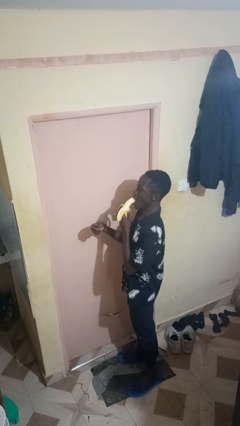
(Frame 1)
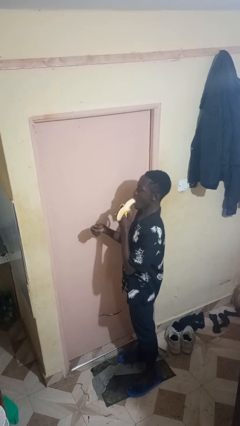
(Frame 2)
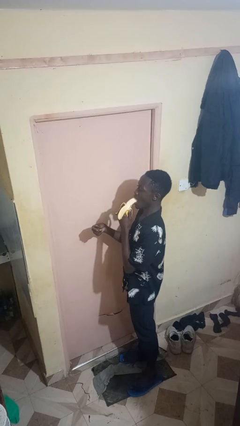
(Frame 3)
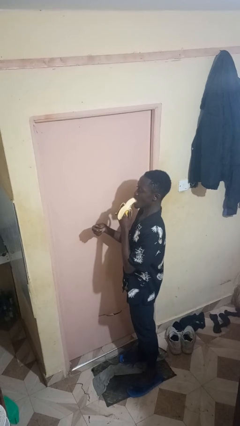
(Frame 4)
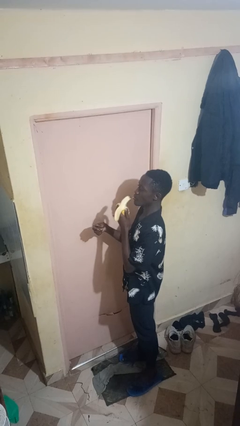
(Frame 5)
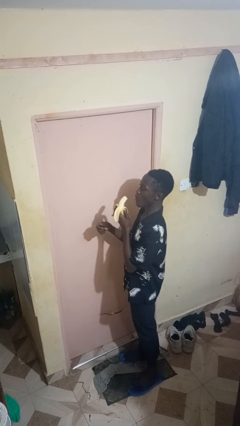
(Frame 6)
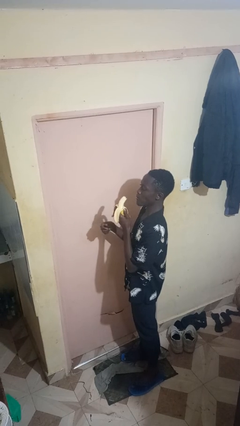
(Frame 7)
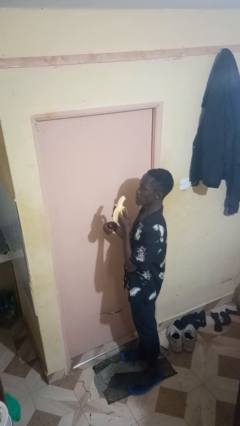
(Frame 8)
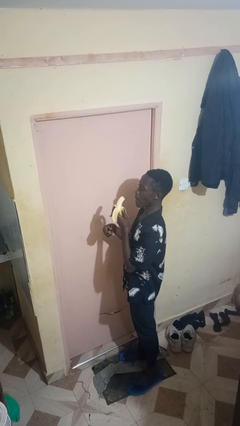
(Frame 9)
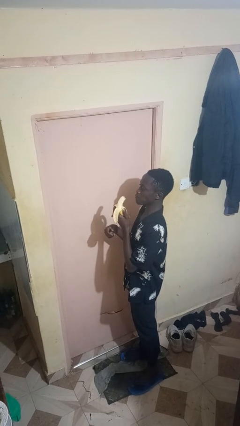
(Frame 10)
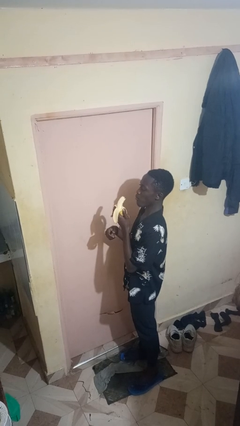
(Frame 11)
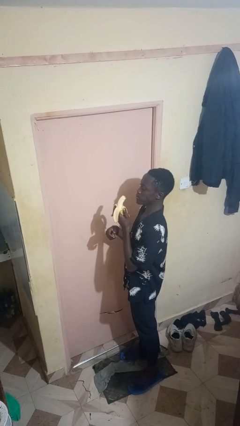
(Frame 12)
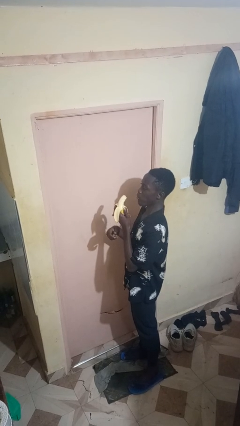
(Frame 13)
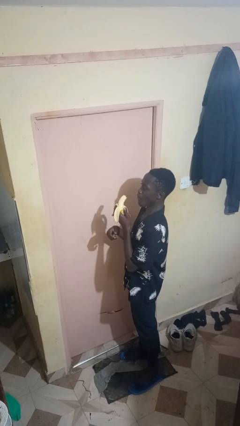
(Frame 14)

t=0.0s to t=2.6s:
person eats banana

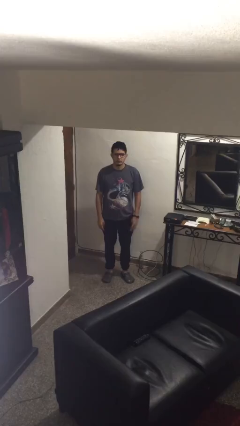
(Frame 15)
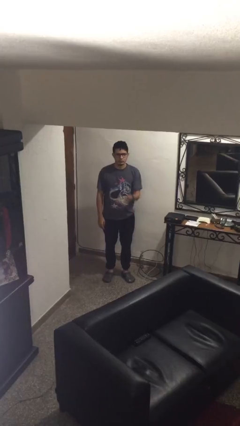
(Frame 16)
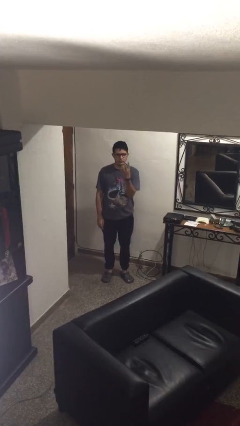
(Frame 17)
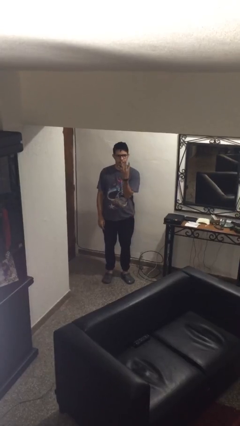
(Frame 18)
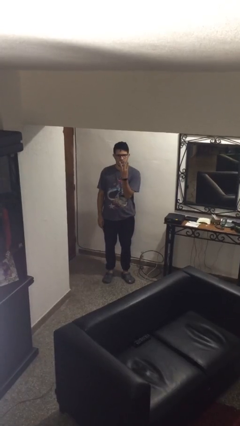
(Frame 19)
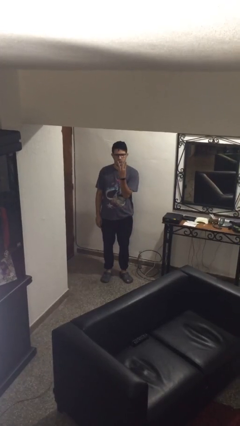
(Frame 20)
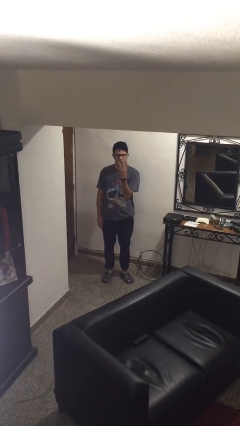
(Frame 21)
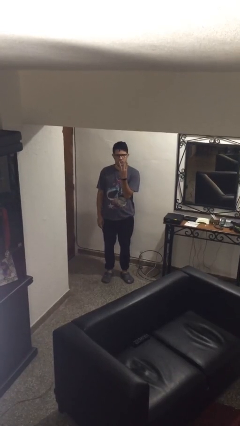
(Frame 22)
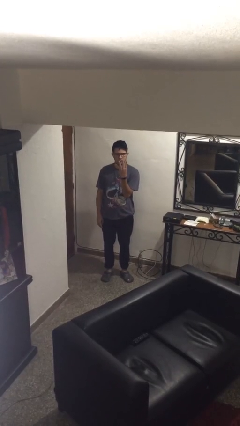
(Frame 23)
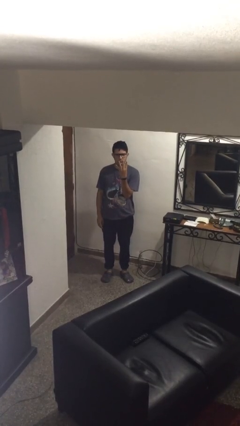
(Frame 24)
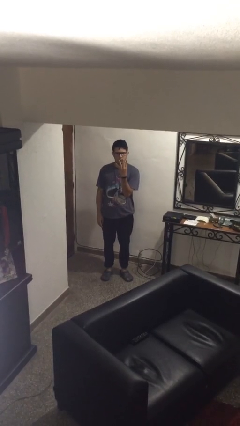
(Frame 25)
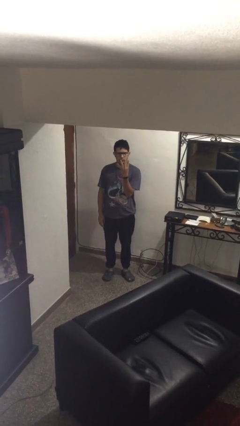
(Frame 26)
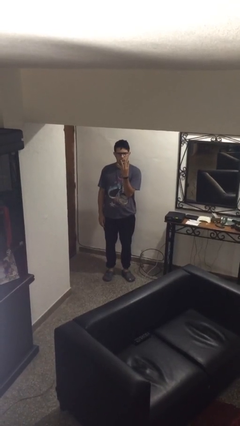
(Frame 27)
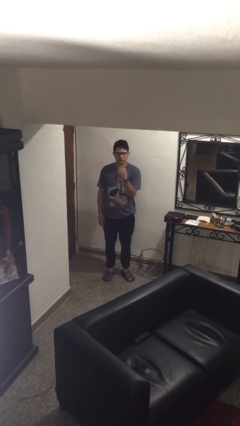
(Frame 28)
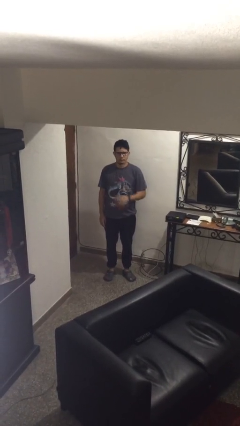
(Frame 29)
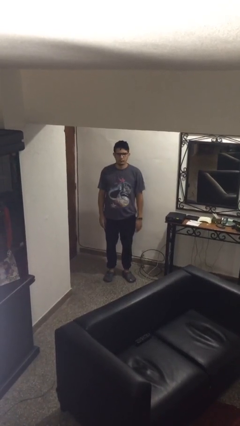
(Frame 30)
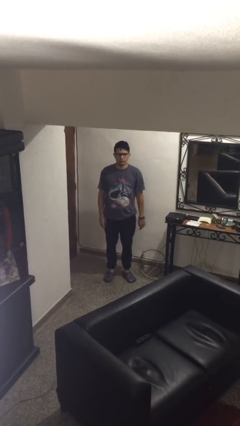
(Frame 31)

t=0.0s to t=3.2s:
person gestures number four

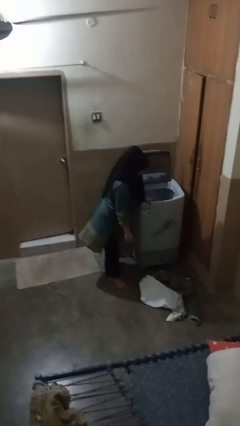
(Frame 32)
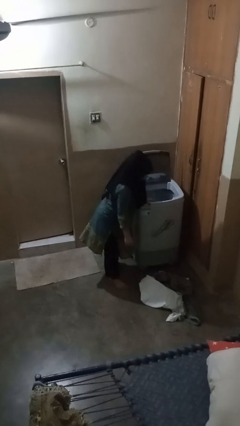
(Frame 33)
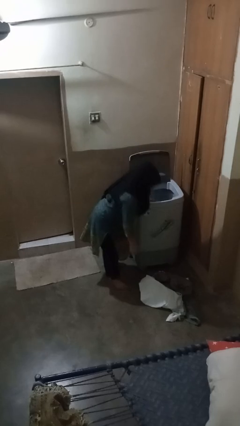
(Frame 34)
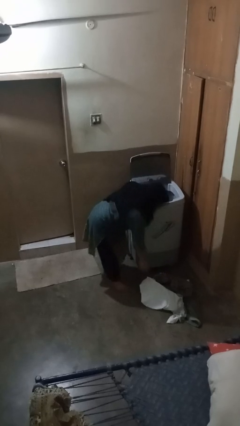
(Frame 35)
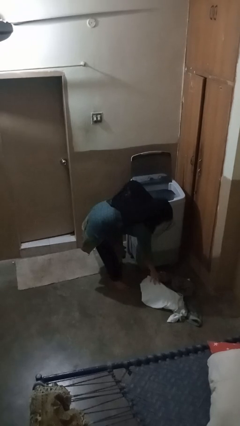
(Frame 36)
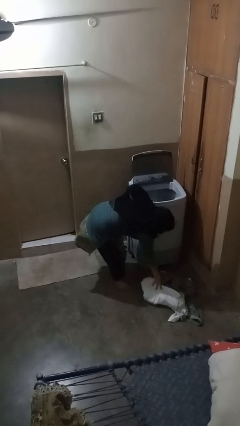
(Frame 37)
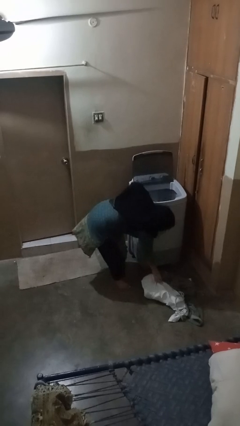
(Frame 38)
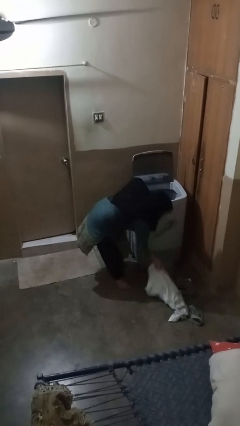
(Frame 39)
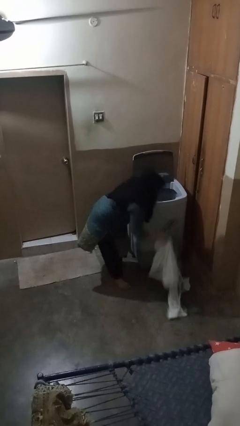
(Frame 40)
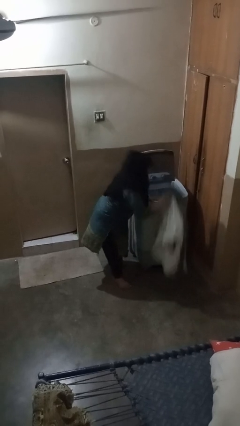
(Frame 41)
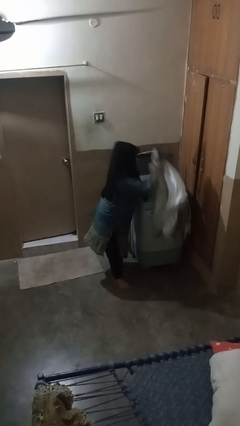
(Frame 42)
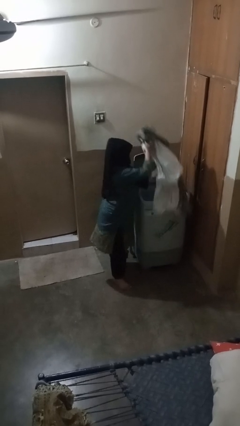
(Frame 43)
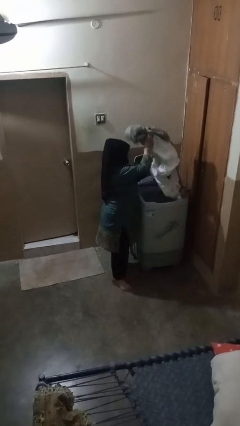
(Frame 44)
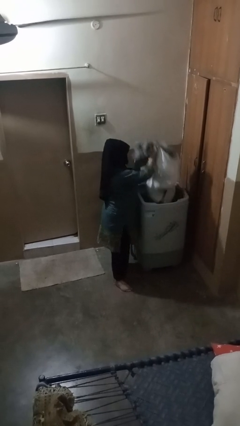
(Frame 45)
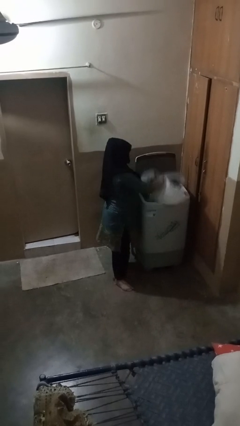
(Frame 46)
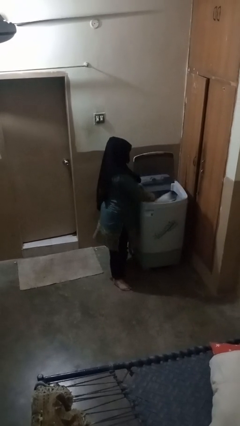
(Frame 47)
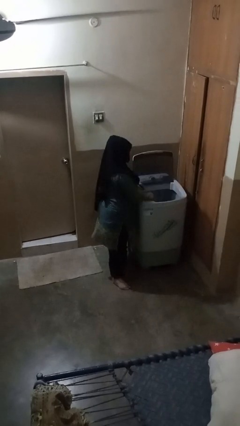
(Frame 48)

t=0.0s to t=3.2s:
person loads clotheswasher

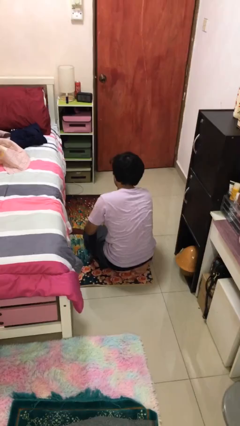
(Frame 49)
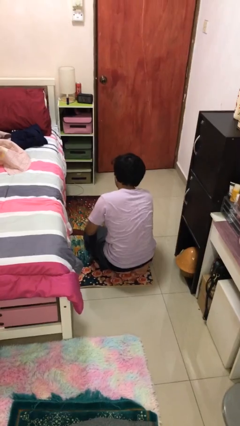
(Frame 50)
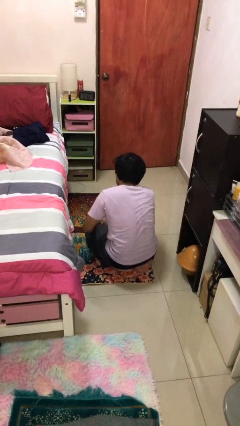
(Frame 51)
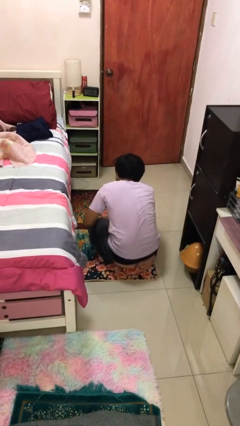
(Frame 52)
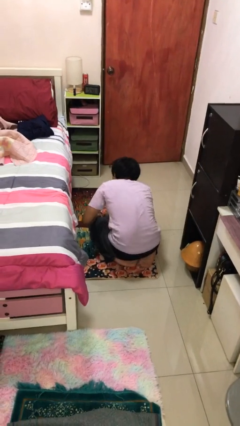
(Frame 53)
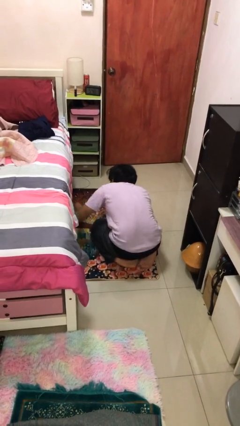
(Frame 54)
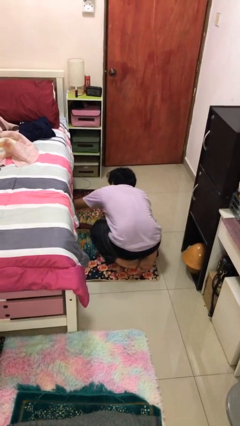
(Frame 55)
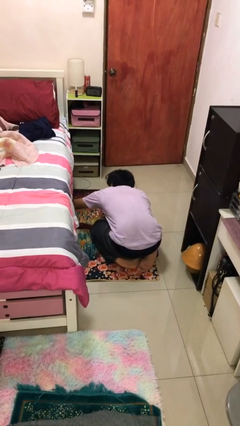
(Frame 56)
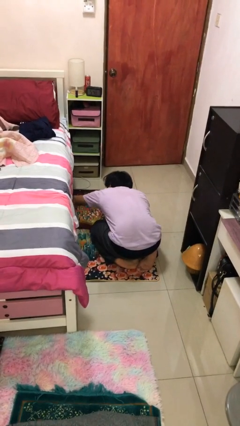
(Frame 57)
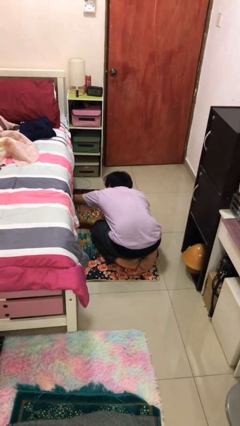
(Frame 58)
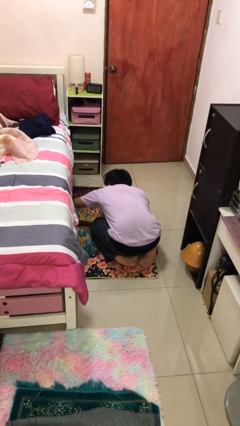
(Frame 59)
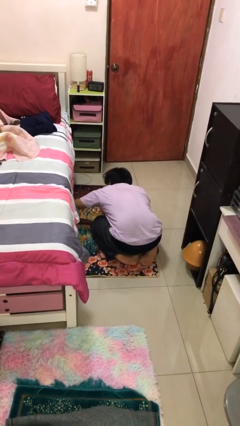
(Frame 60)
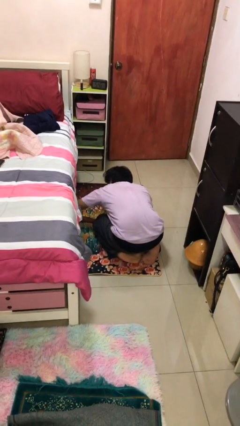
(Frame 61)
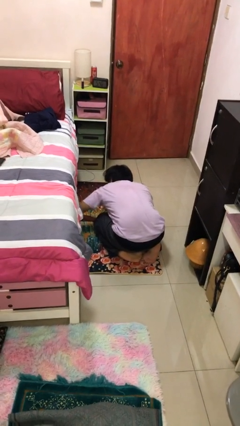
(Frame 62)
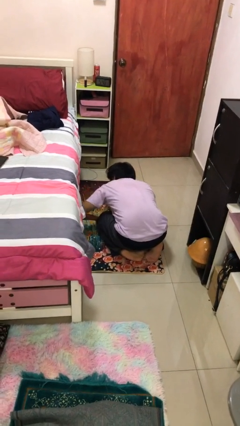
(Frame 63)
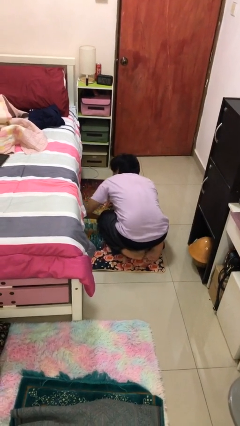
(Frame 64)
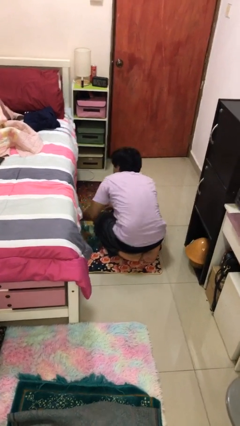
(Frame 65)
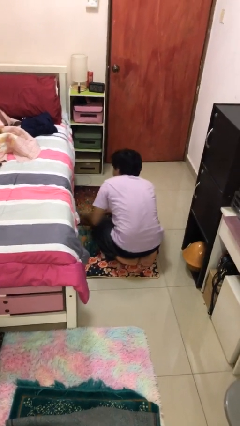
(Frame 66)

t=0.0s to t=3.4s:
person searches under bed

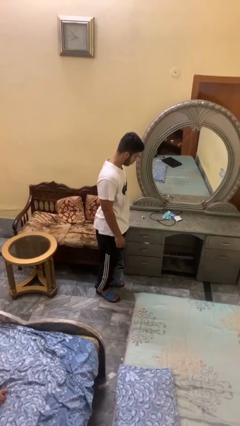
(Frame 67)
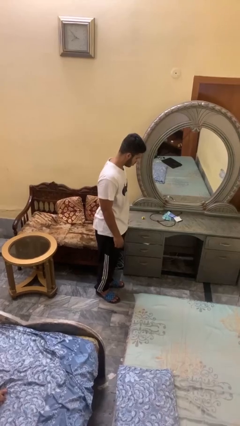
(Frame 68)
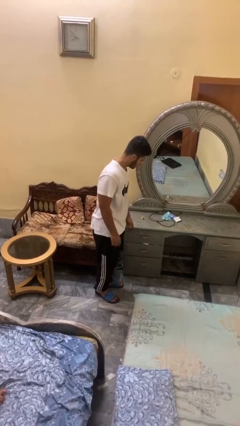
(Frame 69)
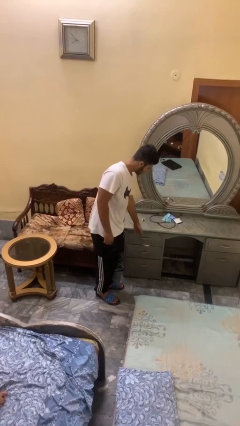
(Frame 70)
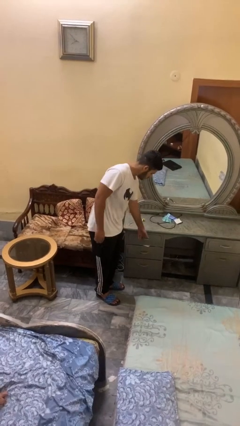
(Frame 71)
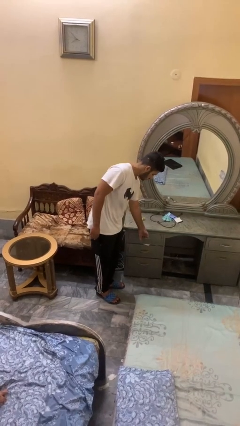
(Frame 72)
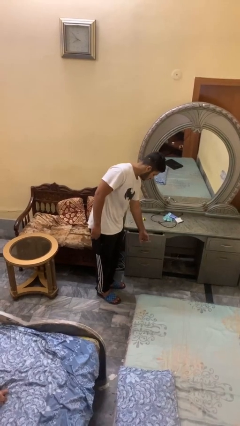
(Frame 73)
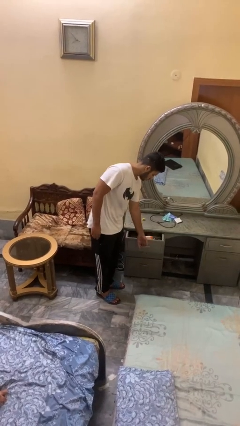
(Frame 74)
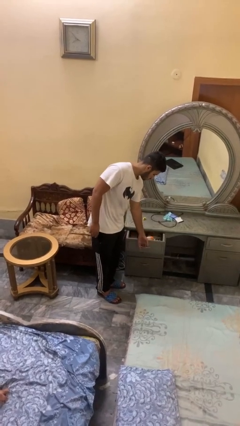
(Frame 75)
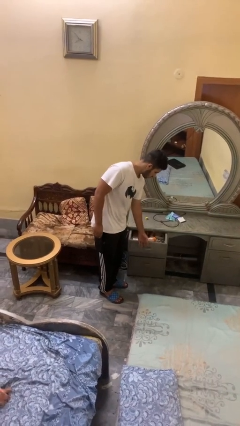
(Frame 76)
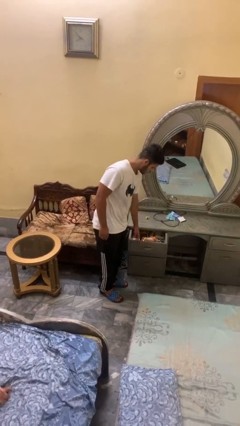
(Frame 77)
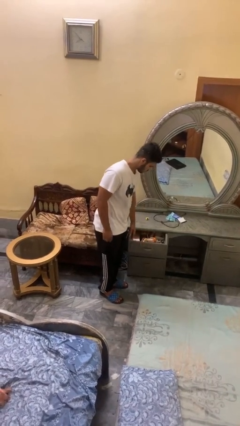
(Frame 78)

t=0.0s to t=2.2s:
person opens dresser drawer

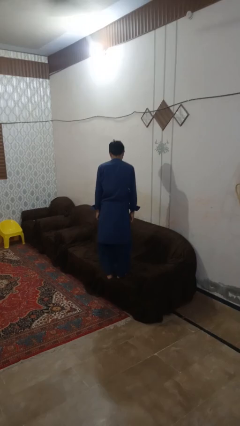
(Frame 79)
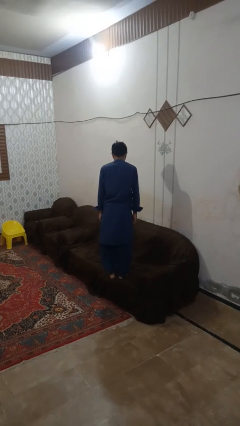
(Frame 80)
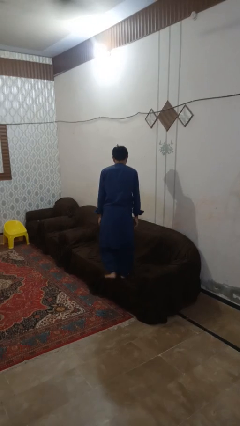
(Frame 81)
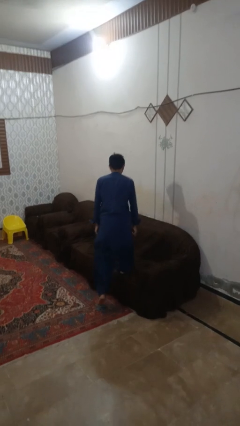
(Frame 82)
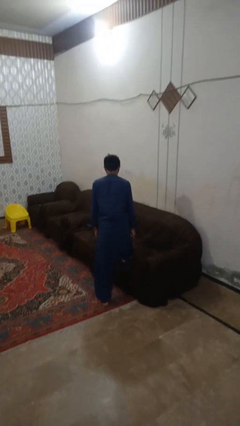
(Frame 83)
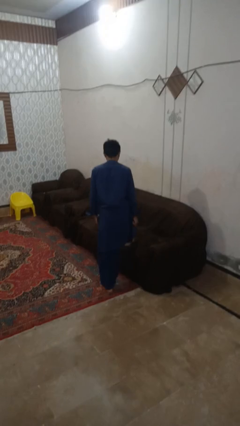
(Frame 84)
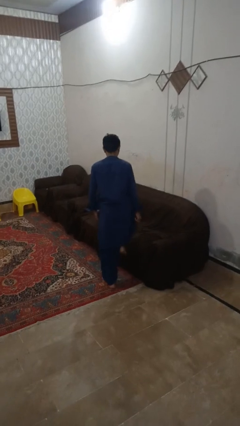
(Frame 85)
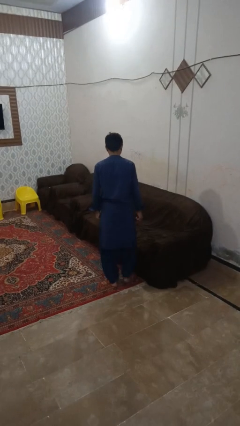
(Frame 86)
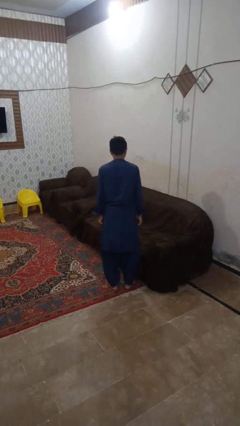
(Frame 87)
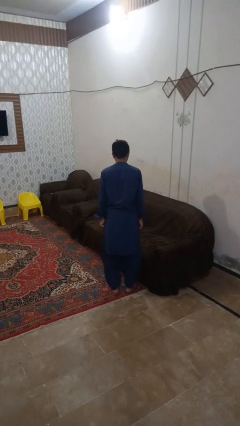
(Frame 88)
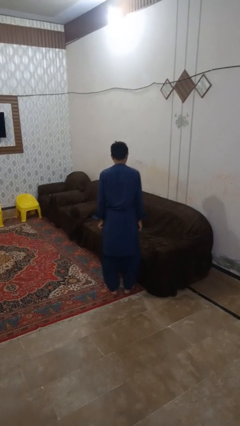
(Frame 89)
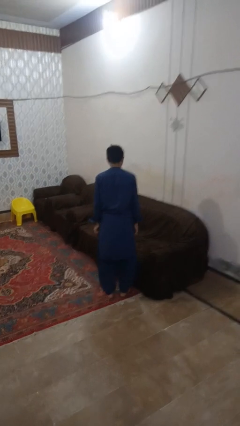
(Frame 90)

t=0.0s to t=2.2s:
person climbs off couch

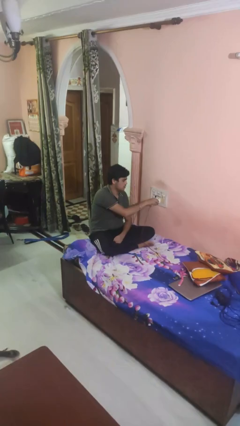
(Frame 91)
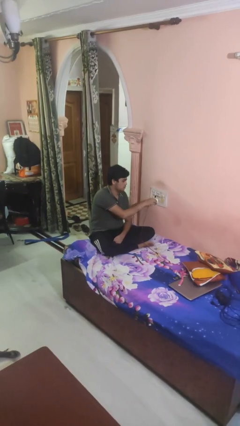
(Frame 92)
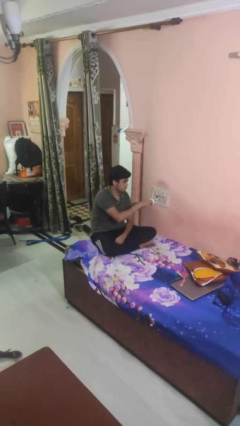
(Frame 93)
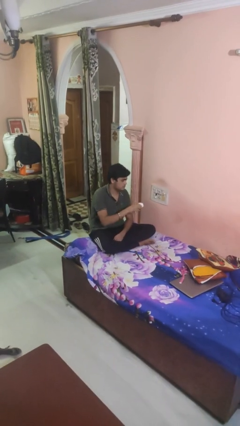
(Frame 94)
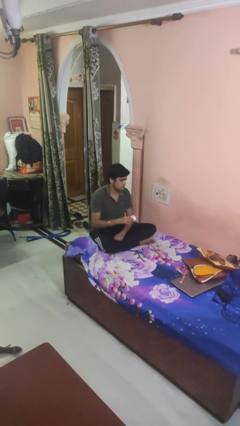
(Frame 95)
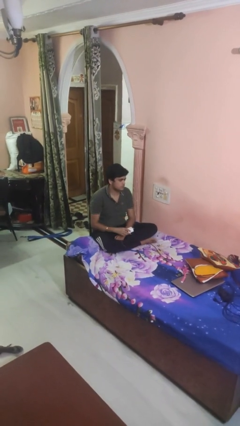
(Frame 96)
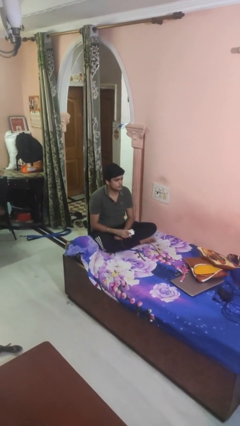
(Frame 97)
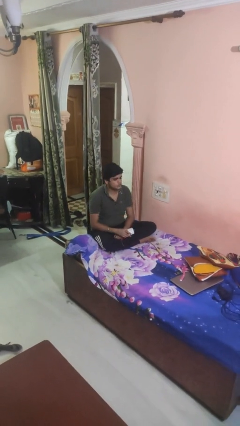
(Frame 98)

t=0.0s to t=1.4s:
person unplugs from electrical socket
